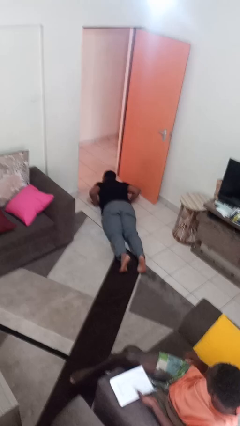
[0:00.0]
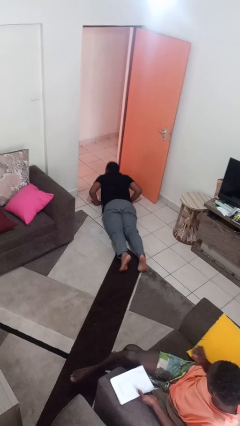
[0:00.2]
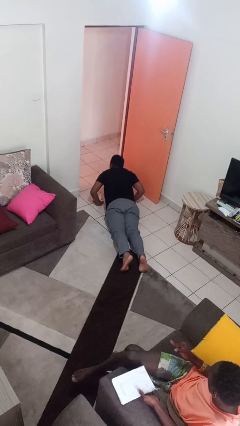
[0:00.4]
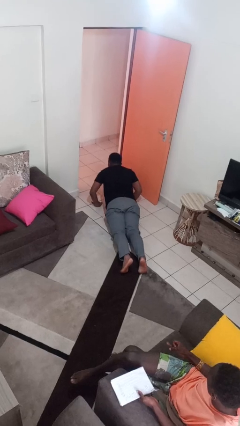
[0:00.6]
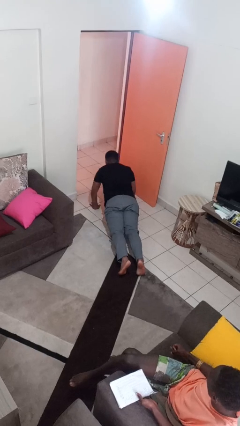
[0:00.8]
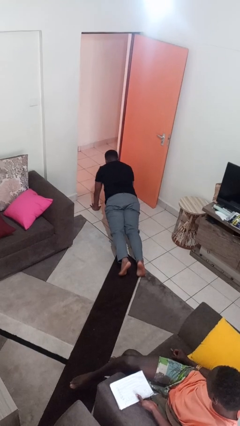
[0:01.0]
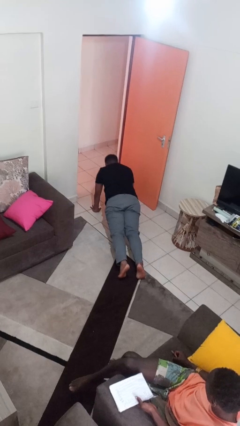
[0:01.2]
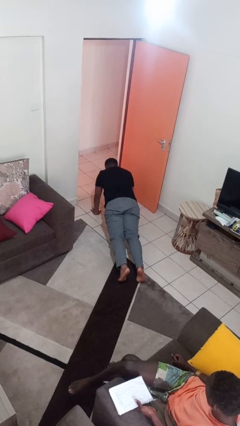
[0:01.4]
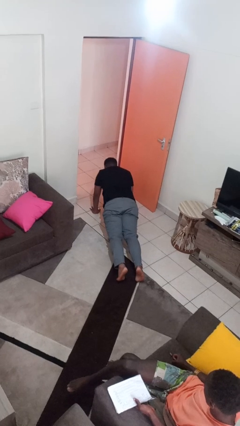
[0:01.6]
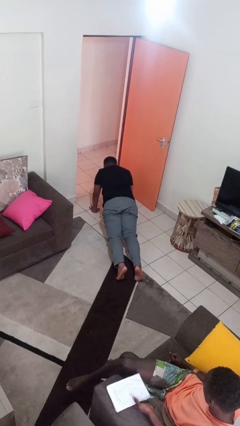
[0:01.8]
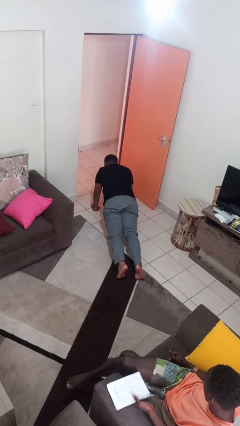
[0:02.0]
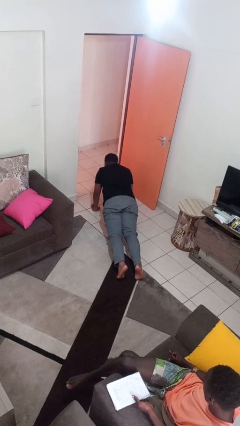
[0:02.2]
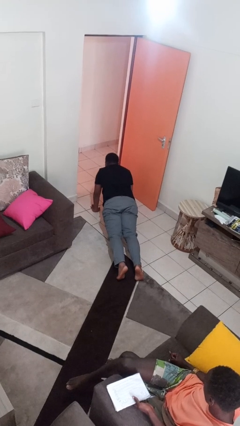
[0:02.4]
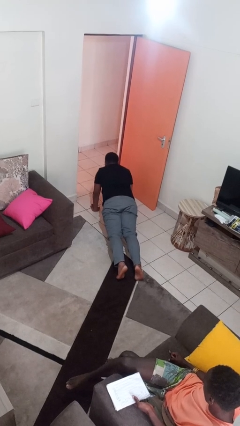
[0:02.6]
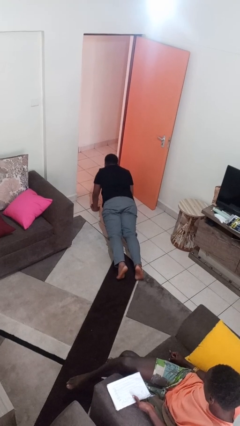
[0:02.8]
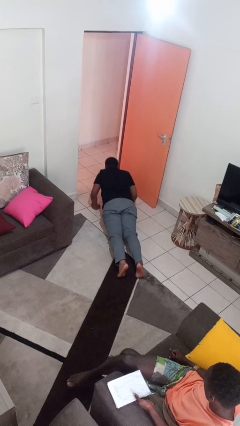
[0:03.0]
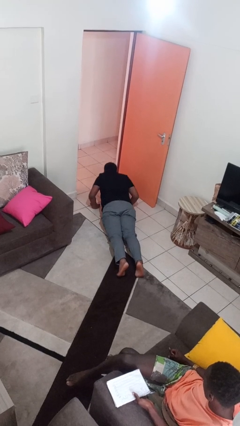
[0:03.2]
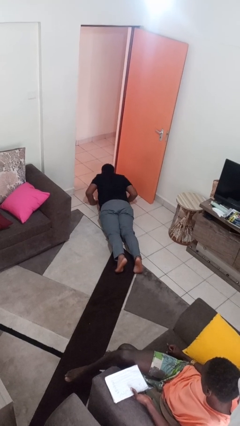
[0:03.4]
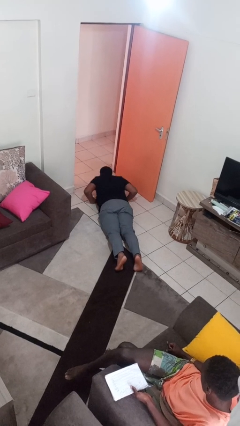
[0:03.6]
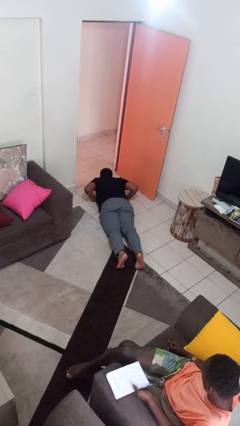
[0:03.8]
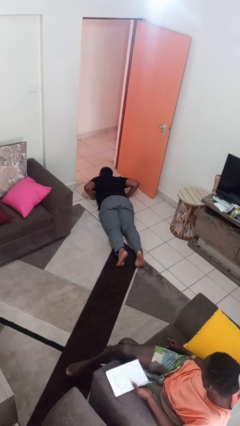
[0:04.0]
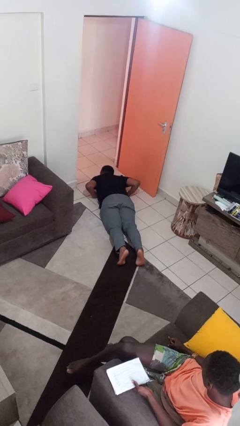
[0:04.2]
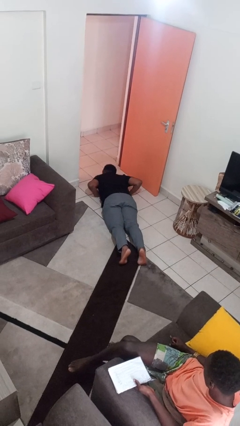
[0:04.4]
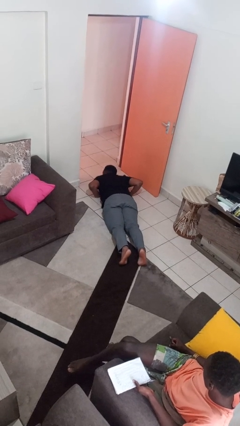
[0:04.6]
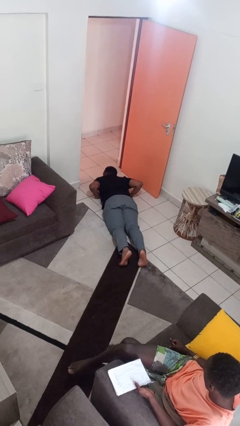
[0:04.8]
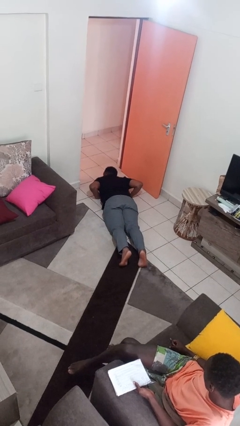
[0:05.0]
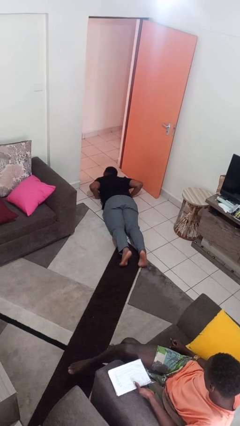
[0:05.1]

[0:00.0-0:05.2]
person exercises with pushup

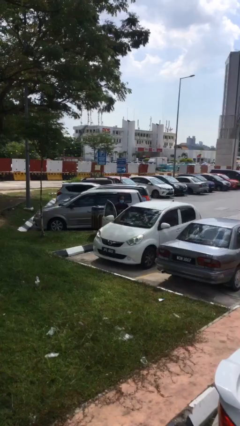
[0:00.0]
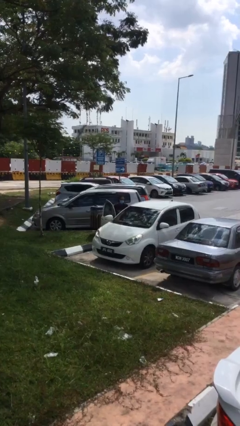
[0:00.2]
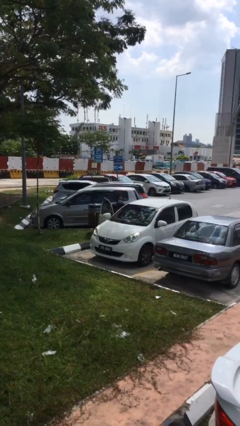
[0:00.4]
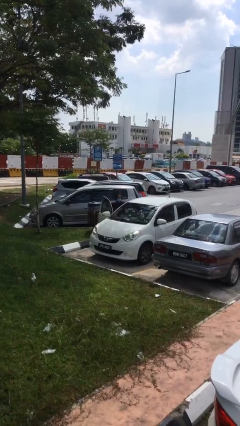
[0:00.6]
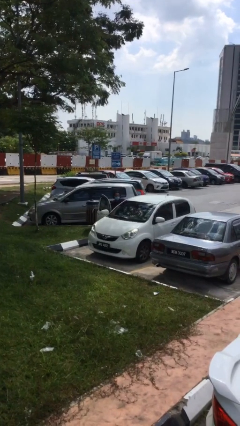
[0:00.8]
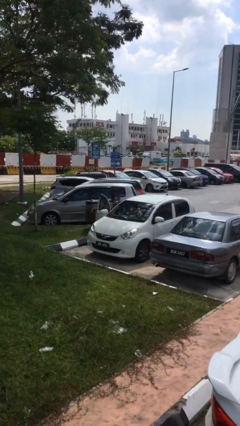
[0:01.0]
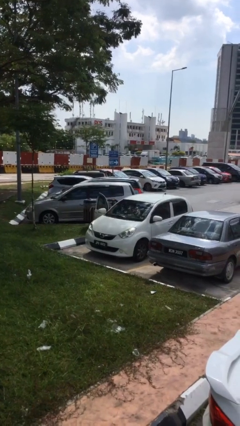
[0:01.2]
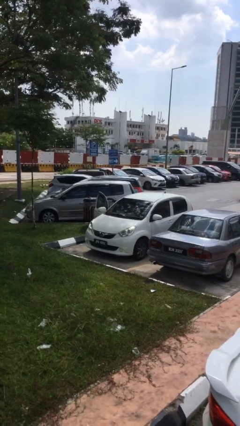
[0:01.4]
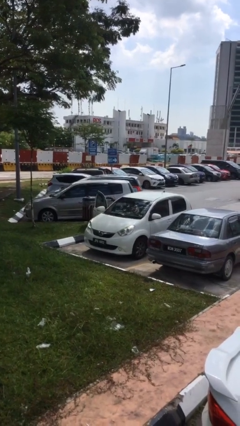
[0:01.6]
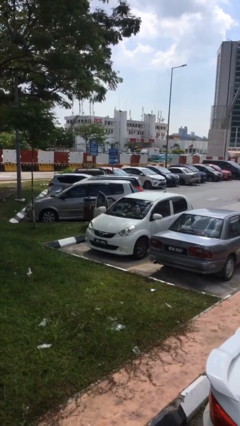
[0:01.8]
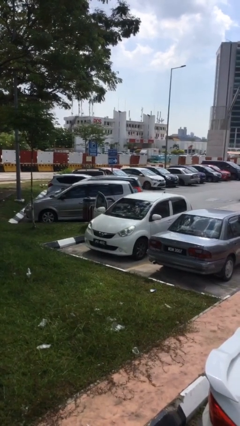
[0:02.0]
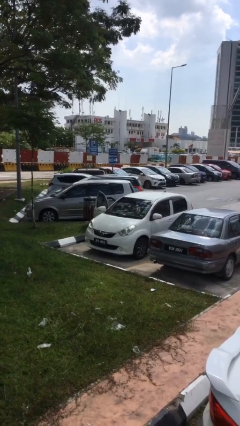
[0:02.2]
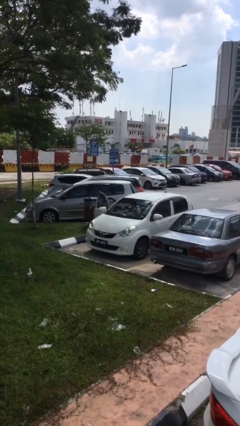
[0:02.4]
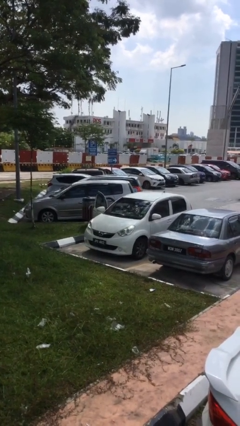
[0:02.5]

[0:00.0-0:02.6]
person enters car

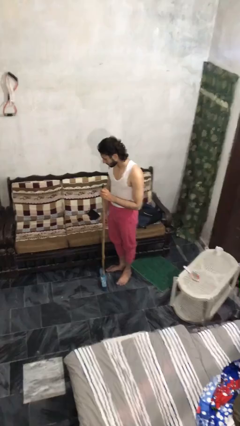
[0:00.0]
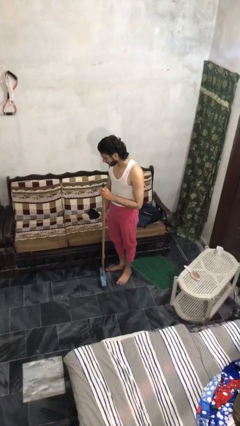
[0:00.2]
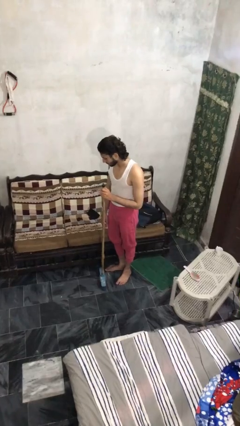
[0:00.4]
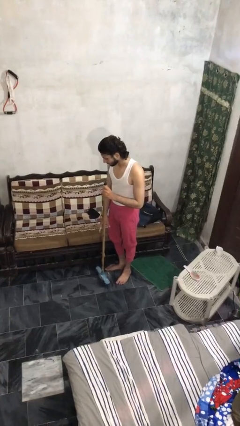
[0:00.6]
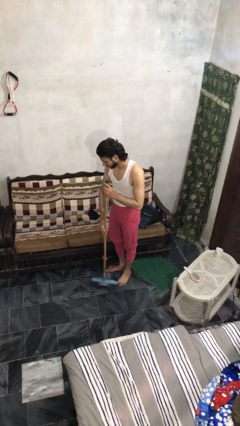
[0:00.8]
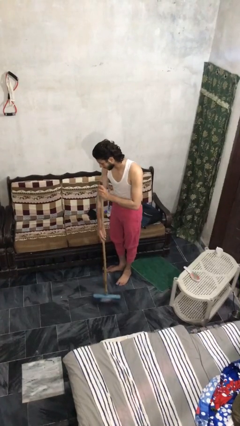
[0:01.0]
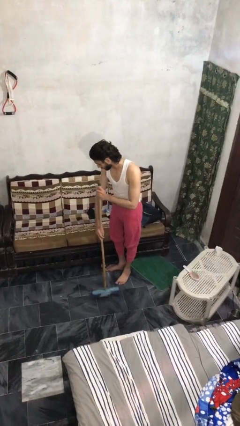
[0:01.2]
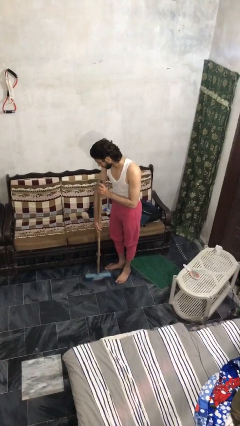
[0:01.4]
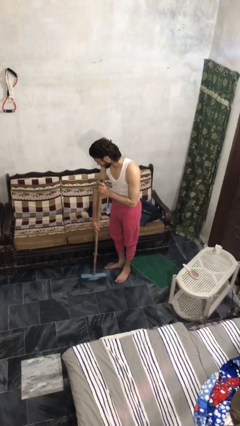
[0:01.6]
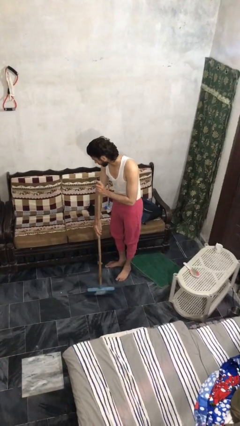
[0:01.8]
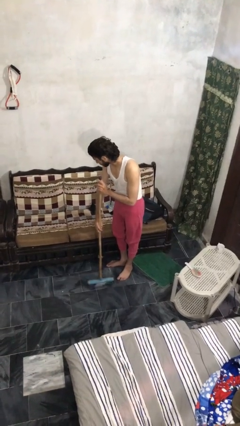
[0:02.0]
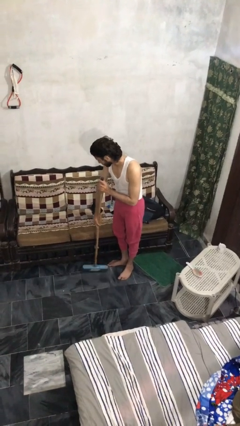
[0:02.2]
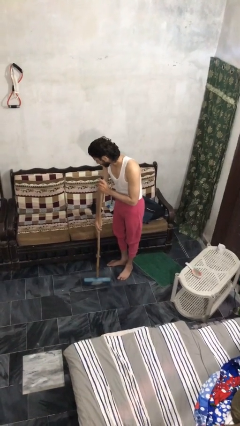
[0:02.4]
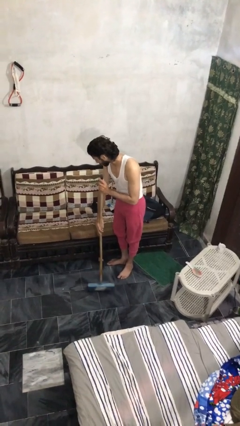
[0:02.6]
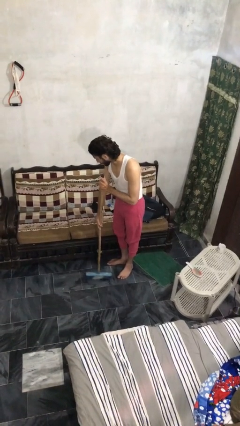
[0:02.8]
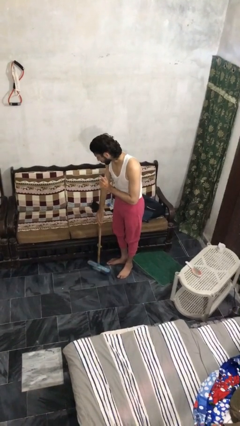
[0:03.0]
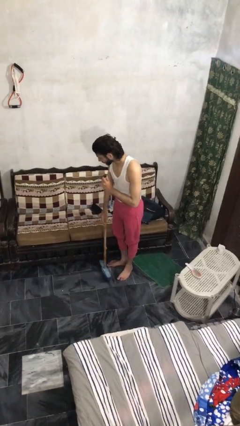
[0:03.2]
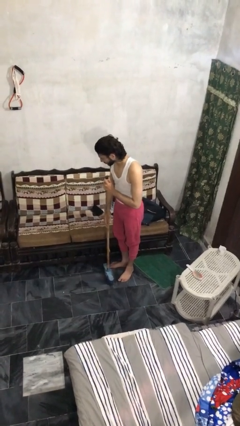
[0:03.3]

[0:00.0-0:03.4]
person sweeps floor

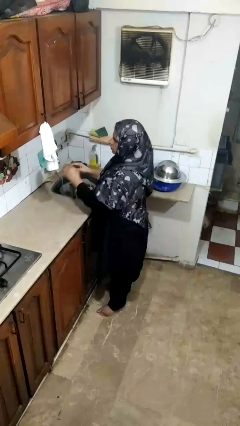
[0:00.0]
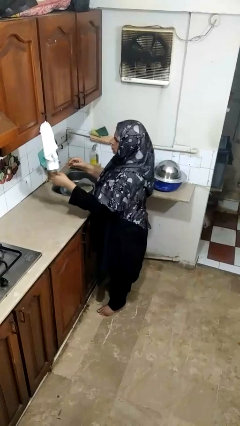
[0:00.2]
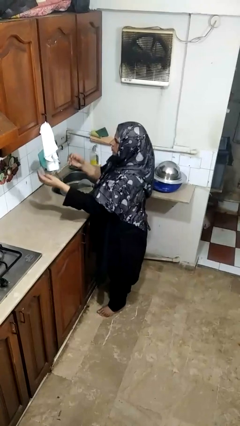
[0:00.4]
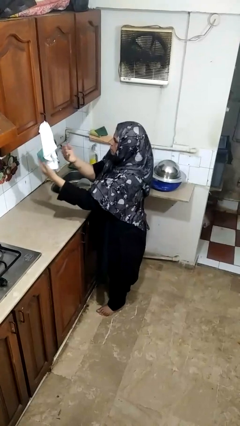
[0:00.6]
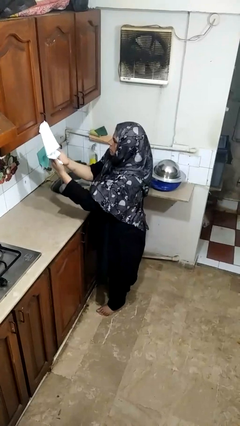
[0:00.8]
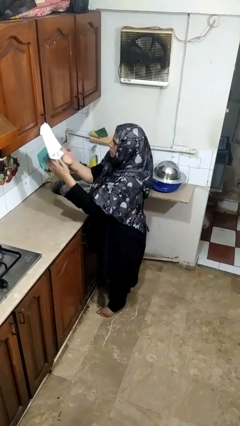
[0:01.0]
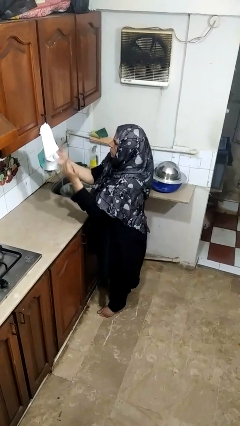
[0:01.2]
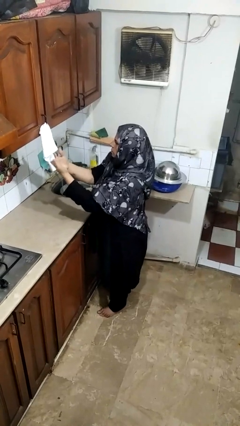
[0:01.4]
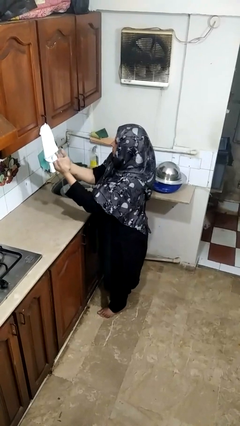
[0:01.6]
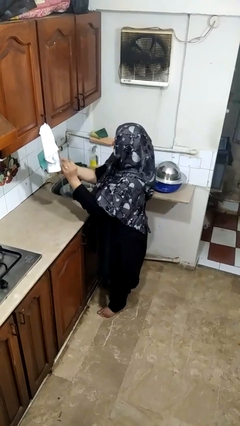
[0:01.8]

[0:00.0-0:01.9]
person dries hands with towel

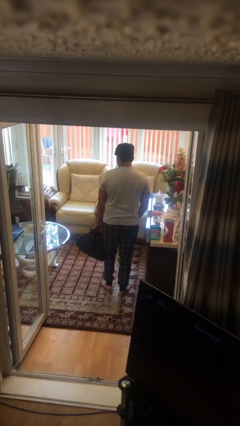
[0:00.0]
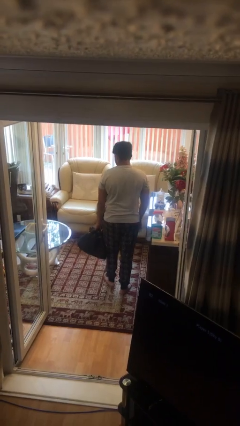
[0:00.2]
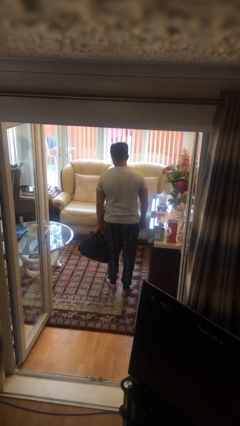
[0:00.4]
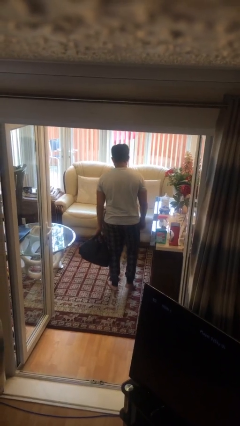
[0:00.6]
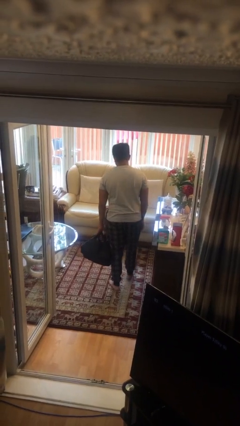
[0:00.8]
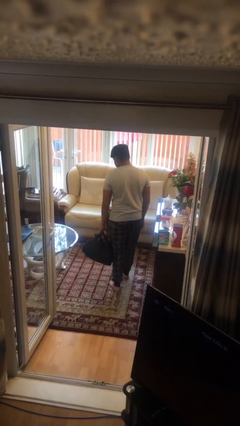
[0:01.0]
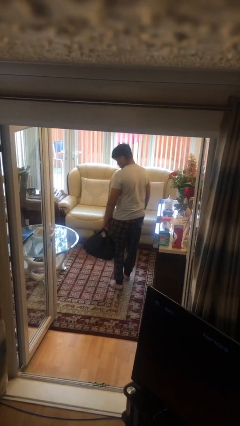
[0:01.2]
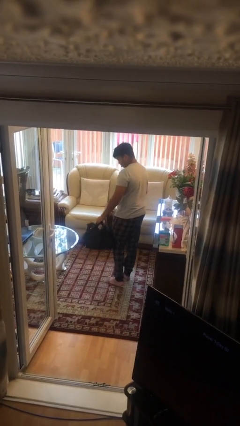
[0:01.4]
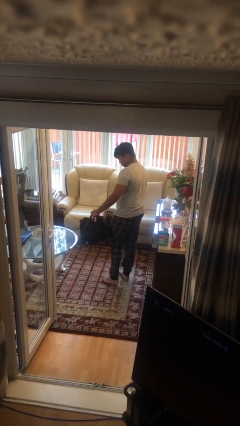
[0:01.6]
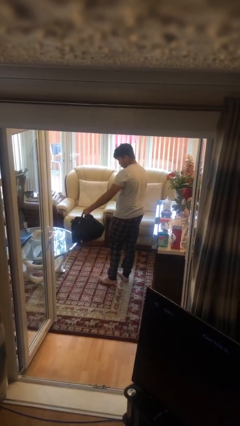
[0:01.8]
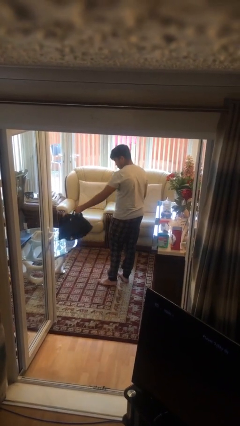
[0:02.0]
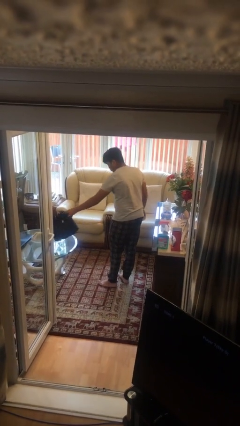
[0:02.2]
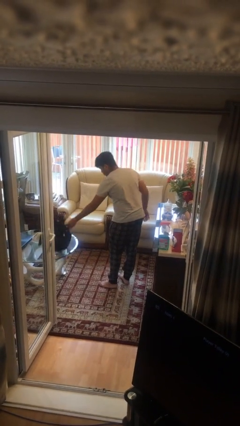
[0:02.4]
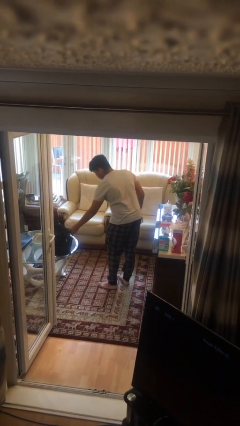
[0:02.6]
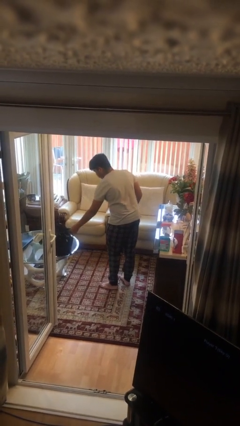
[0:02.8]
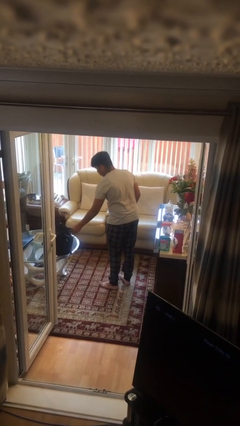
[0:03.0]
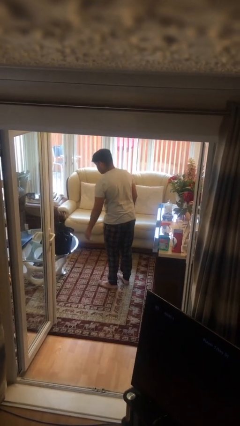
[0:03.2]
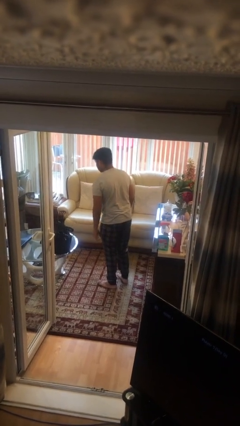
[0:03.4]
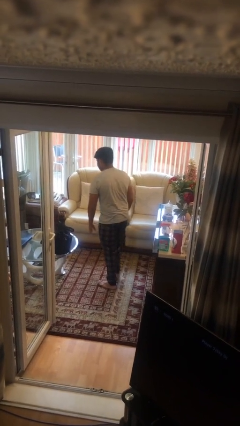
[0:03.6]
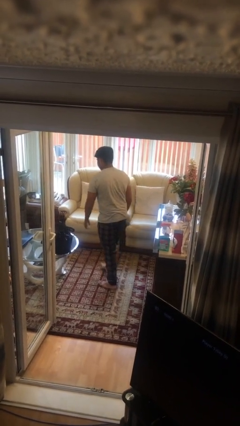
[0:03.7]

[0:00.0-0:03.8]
person puts down object on table

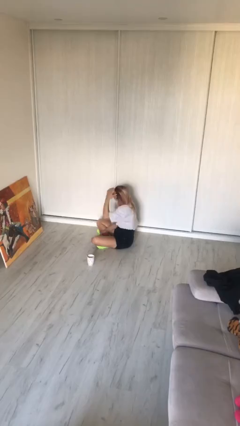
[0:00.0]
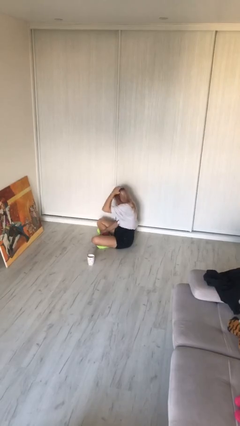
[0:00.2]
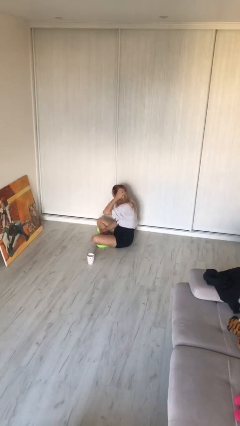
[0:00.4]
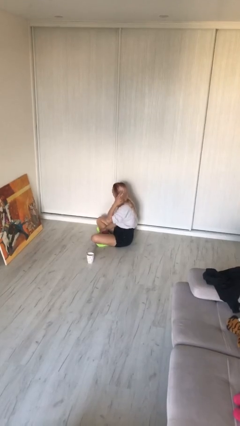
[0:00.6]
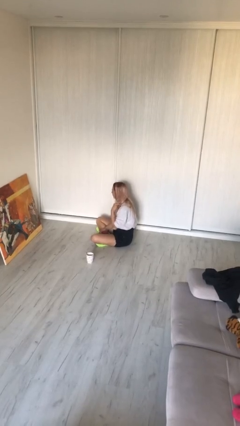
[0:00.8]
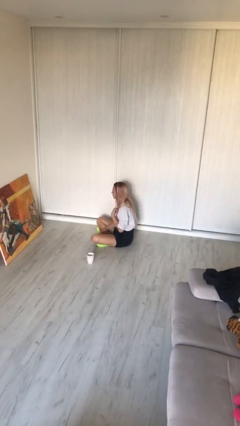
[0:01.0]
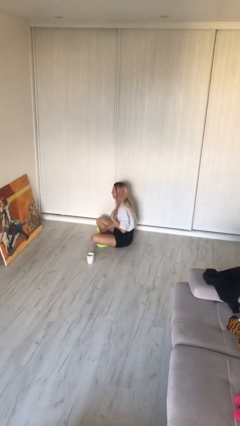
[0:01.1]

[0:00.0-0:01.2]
person strokes hair
